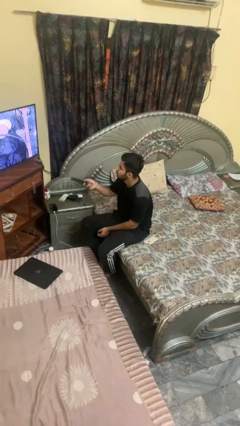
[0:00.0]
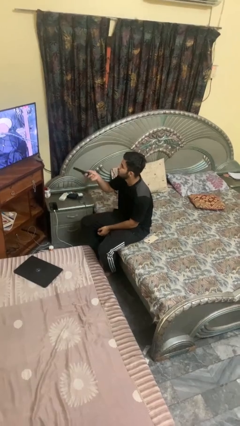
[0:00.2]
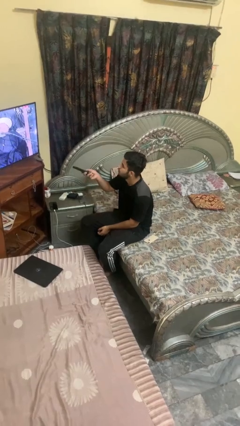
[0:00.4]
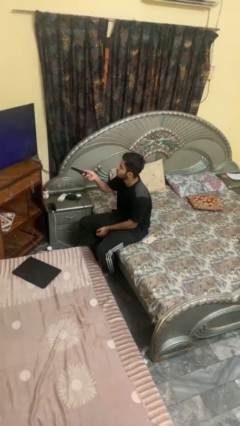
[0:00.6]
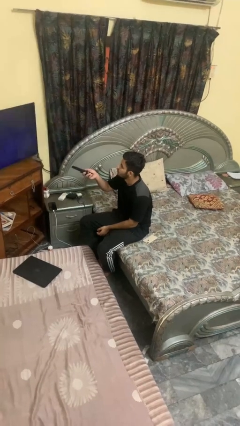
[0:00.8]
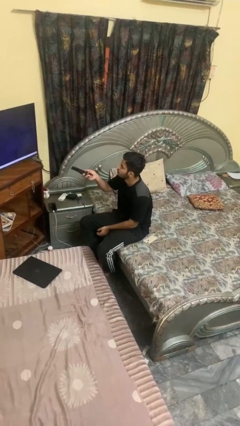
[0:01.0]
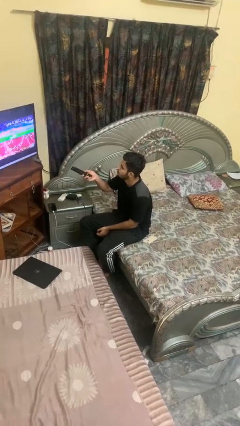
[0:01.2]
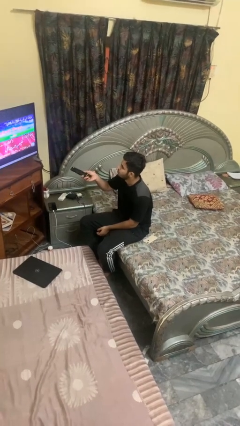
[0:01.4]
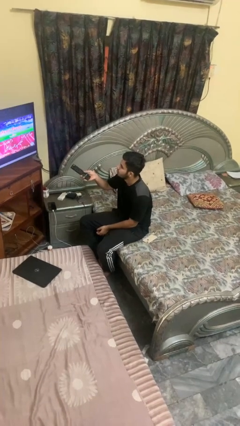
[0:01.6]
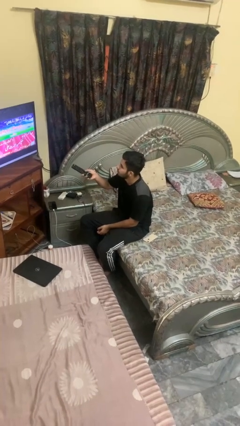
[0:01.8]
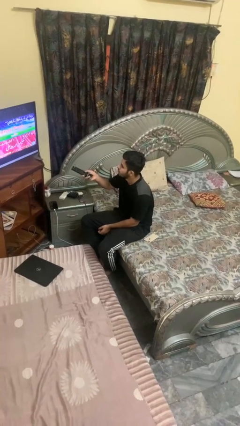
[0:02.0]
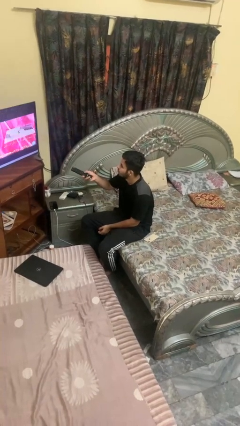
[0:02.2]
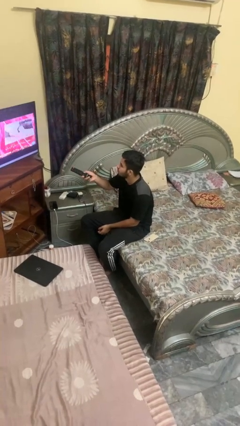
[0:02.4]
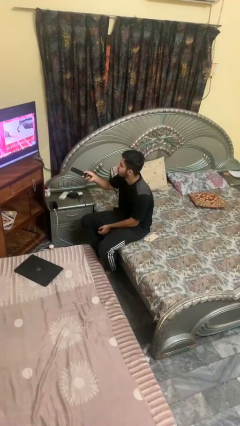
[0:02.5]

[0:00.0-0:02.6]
person uses television remote

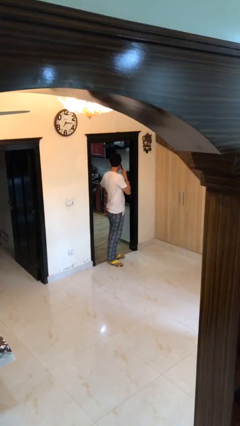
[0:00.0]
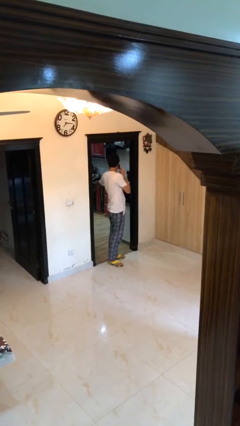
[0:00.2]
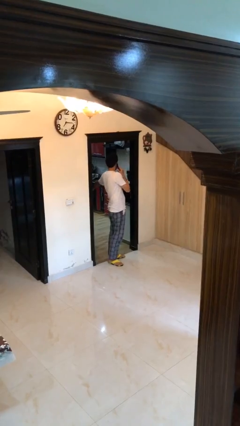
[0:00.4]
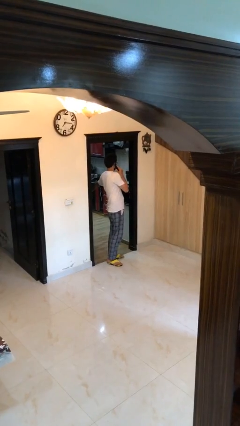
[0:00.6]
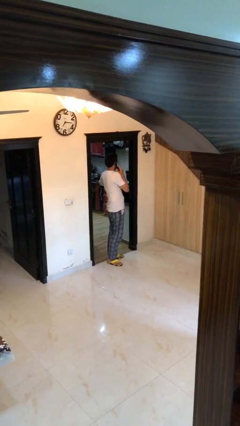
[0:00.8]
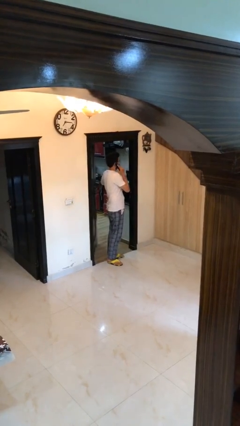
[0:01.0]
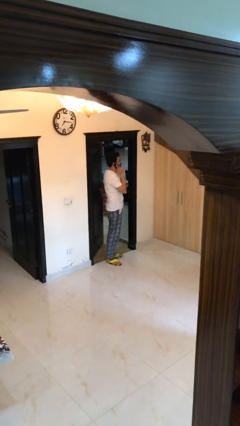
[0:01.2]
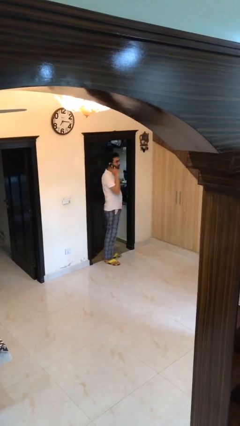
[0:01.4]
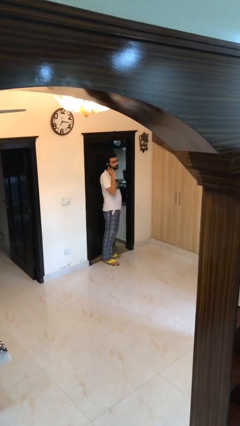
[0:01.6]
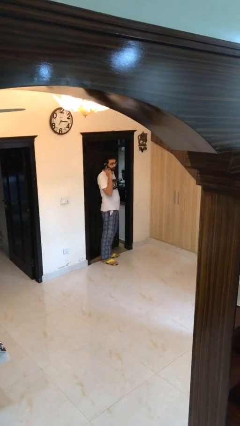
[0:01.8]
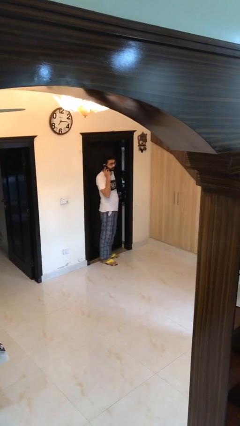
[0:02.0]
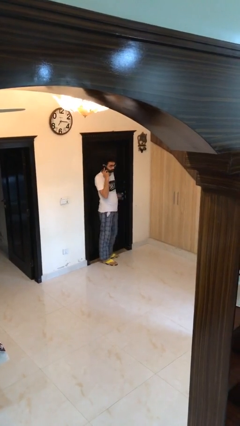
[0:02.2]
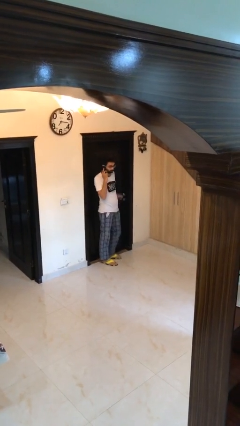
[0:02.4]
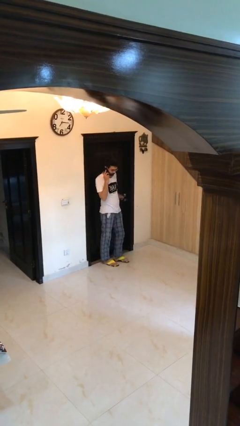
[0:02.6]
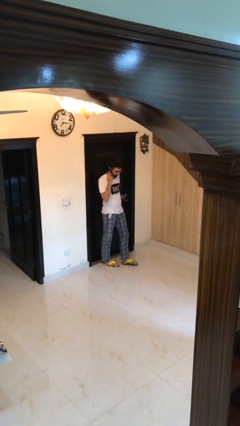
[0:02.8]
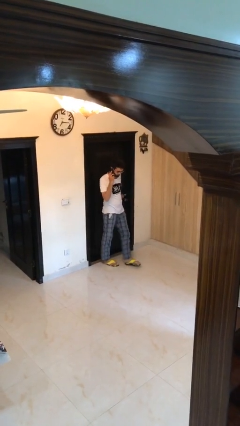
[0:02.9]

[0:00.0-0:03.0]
person closes facility door

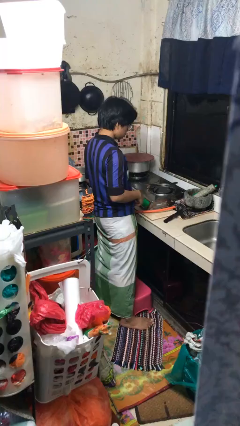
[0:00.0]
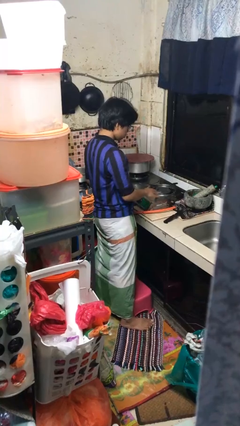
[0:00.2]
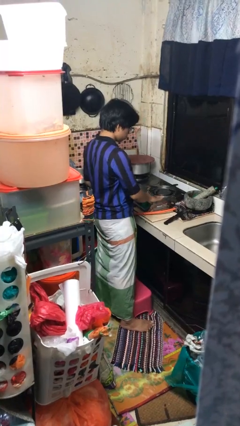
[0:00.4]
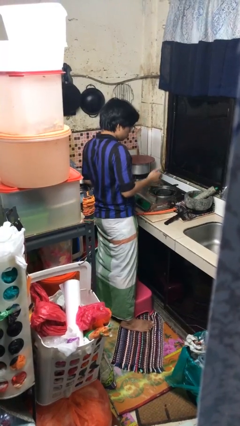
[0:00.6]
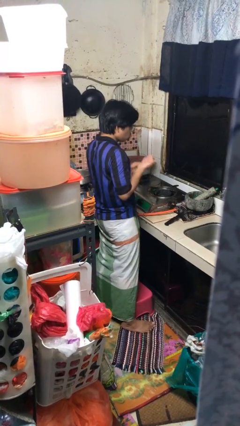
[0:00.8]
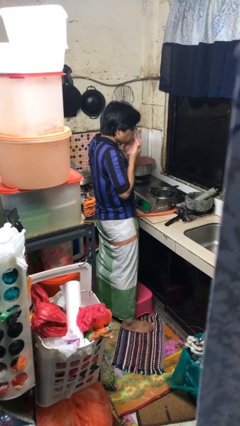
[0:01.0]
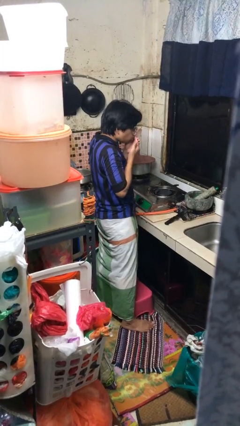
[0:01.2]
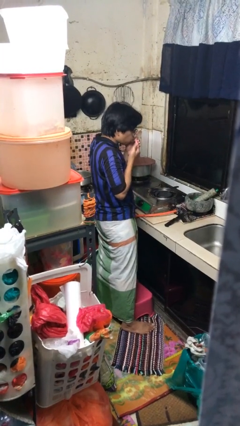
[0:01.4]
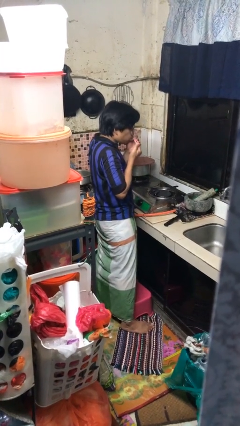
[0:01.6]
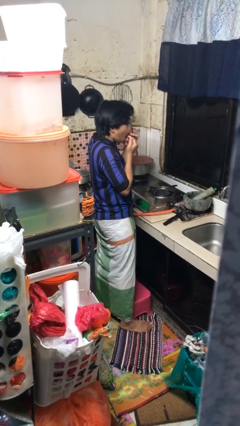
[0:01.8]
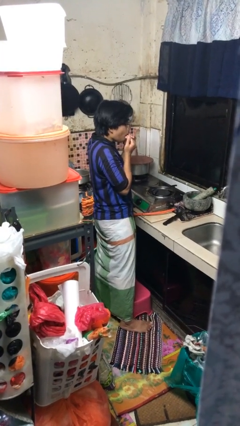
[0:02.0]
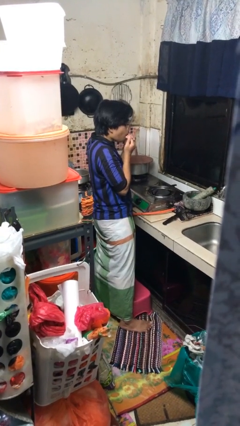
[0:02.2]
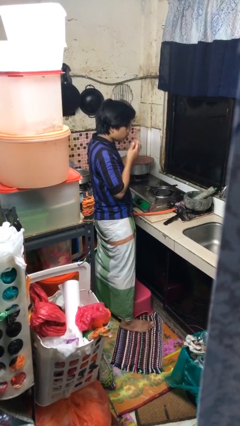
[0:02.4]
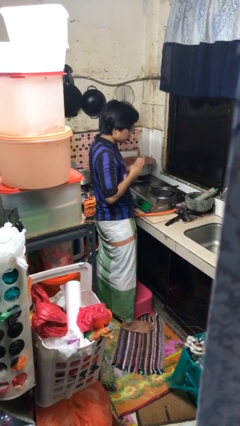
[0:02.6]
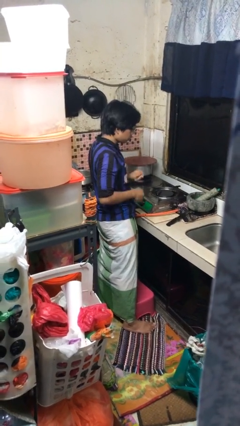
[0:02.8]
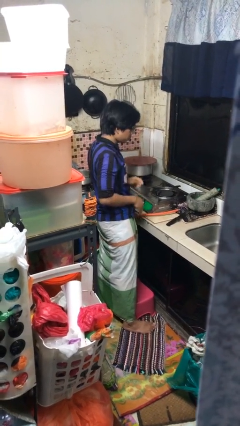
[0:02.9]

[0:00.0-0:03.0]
person burns hand

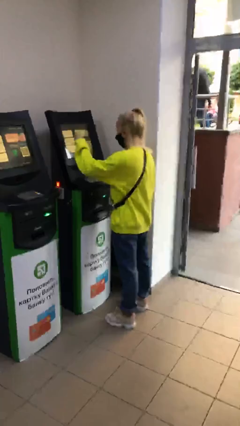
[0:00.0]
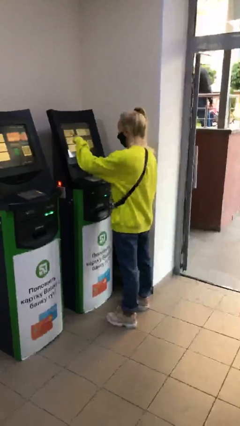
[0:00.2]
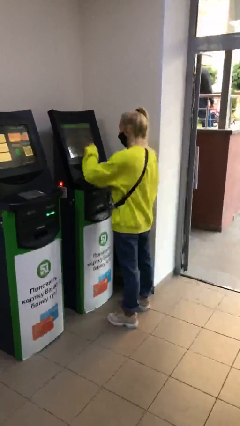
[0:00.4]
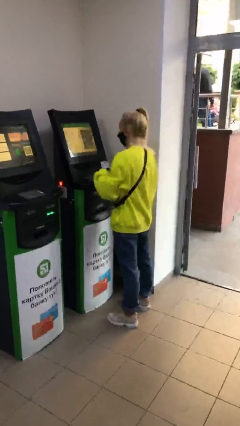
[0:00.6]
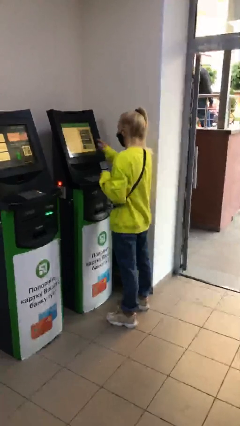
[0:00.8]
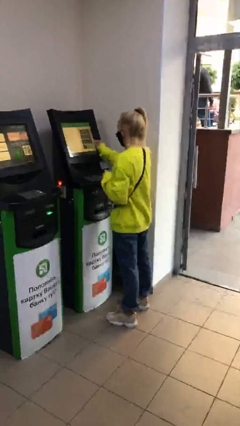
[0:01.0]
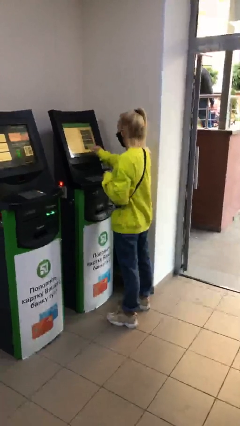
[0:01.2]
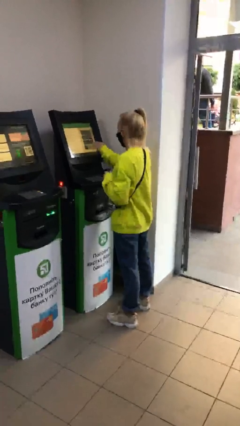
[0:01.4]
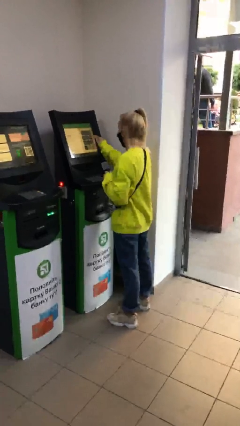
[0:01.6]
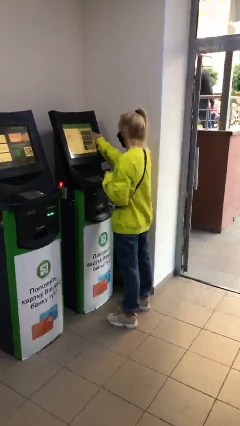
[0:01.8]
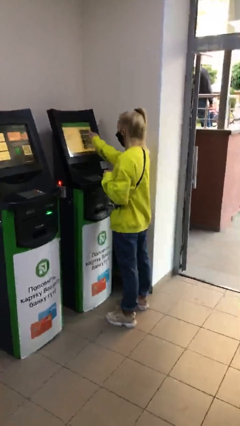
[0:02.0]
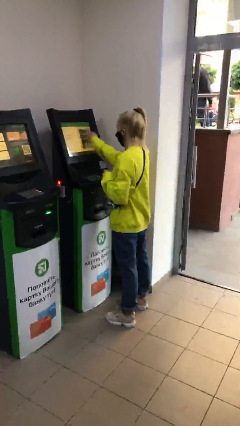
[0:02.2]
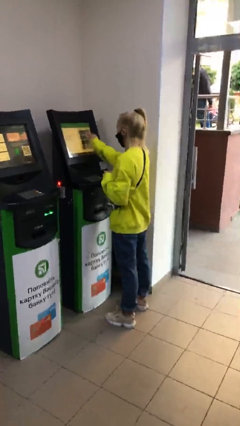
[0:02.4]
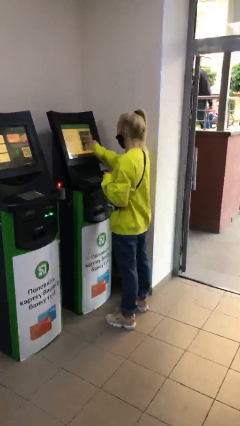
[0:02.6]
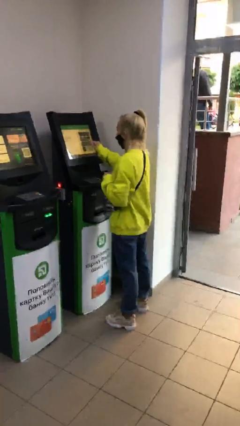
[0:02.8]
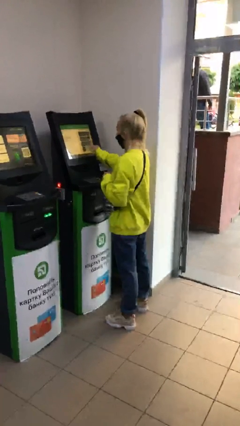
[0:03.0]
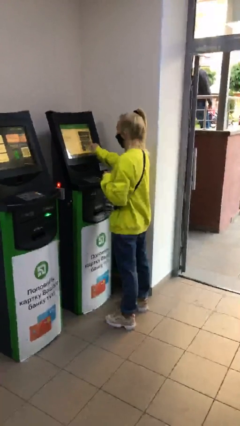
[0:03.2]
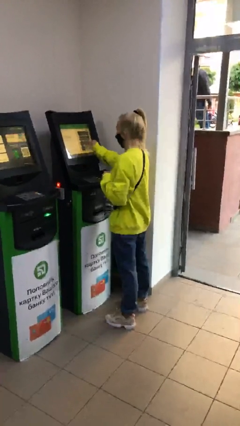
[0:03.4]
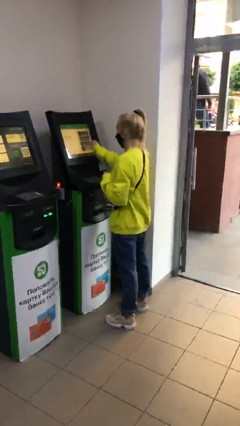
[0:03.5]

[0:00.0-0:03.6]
person purchases from machine

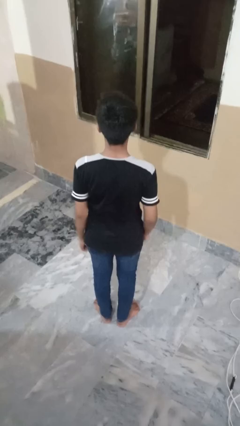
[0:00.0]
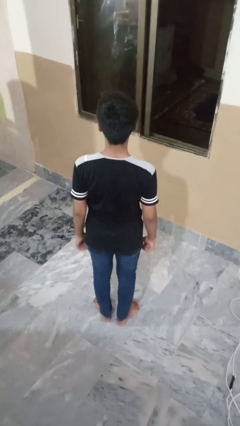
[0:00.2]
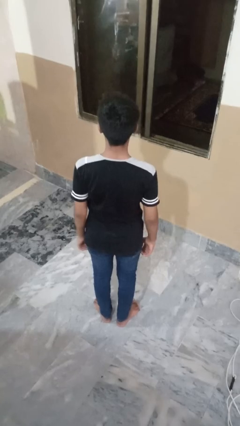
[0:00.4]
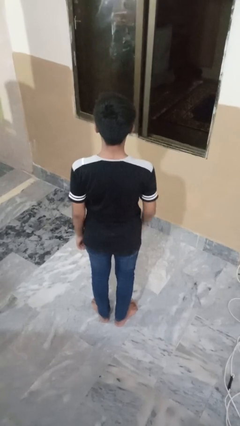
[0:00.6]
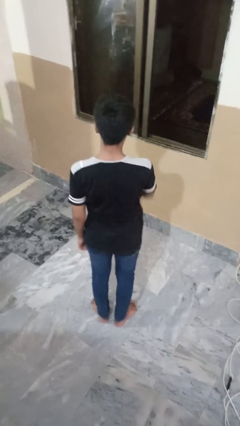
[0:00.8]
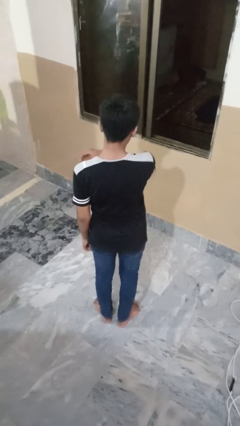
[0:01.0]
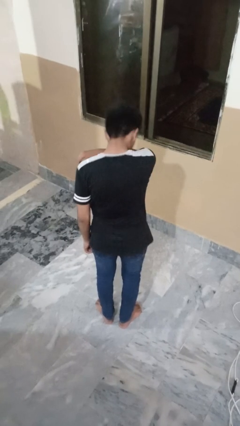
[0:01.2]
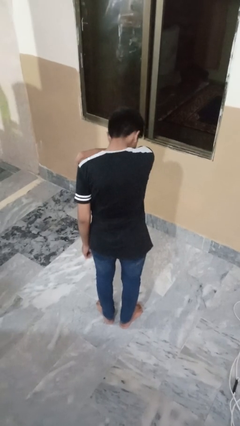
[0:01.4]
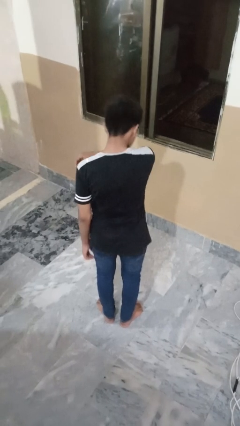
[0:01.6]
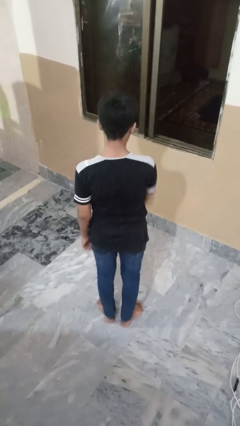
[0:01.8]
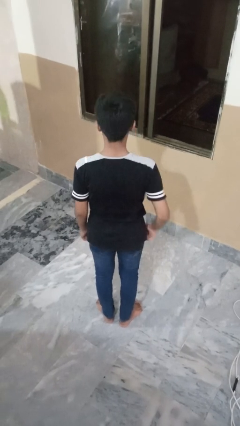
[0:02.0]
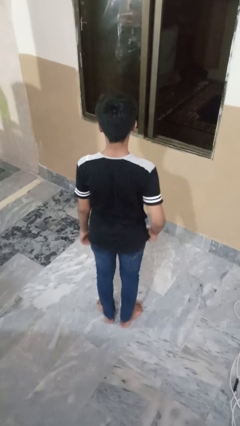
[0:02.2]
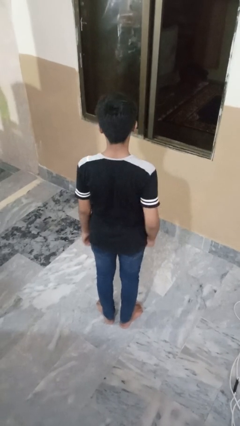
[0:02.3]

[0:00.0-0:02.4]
person sneezes into arm

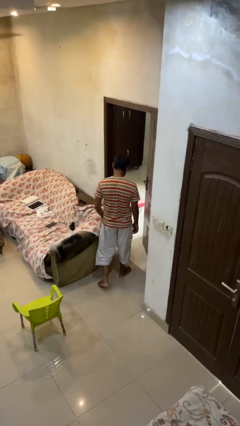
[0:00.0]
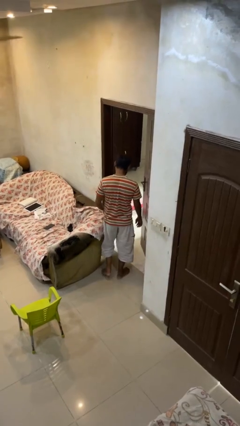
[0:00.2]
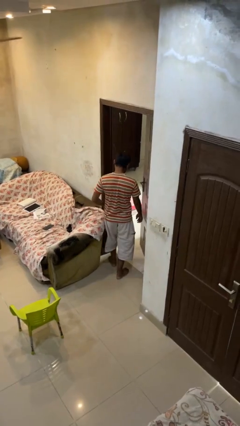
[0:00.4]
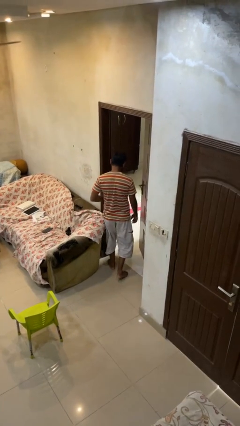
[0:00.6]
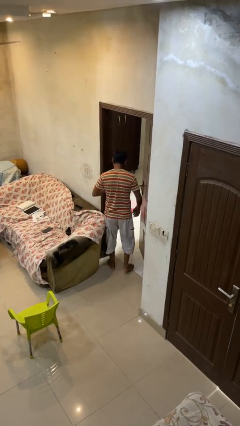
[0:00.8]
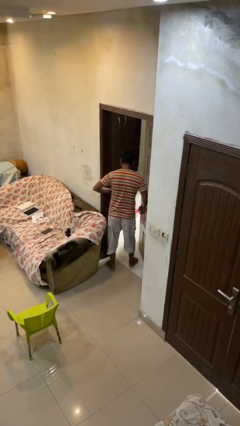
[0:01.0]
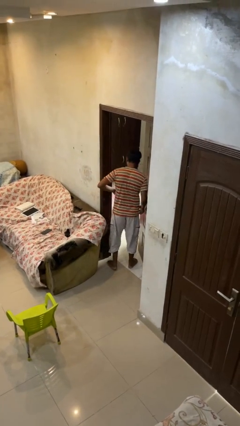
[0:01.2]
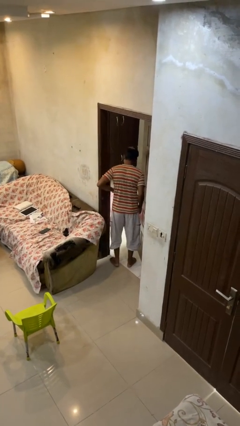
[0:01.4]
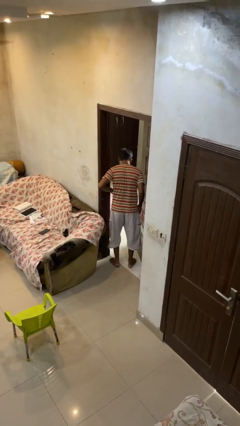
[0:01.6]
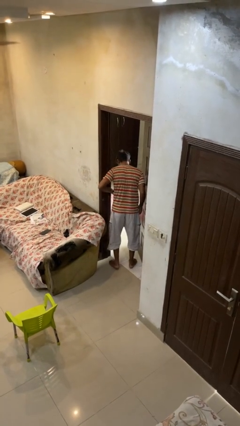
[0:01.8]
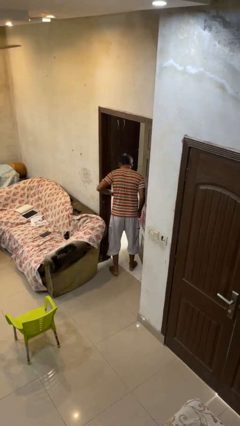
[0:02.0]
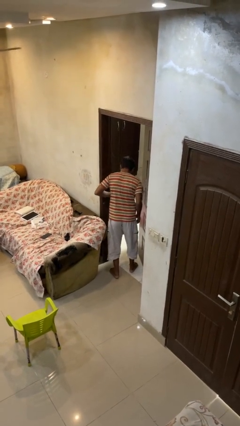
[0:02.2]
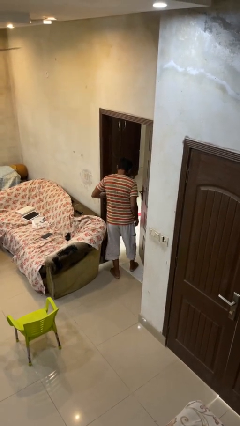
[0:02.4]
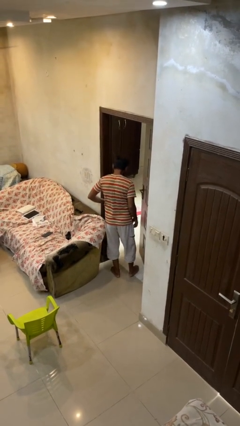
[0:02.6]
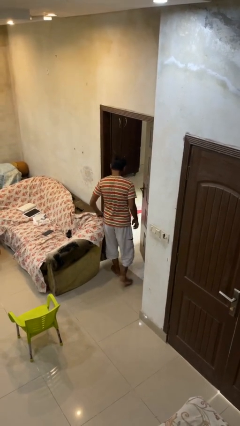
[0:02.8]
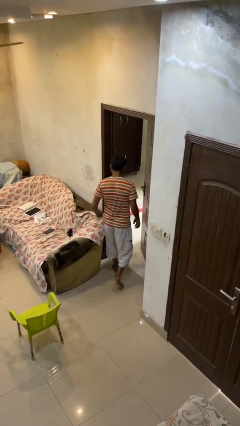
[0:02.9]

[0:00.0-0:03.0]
person bumps into wall
